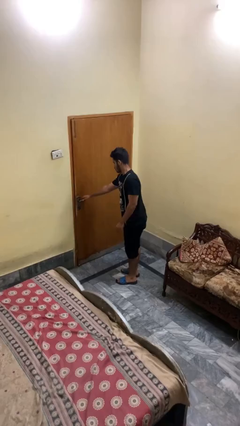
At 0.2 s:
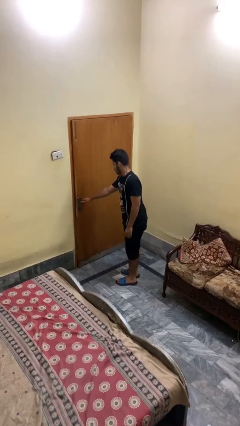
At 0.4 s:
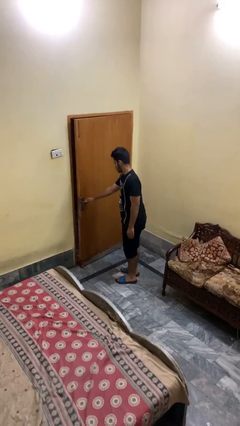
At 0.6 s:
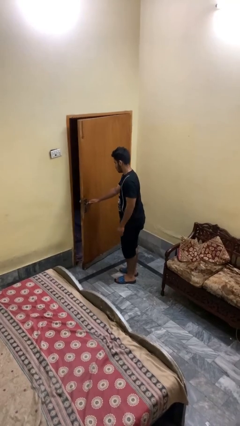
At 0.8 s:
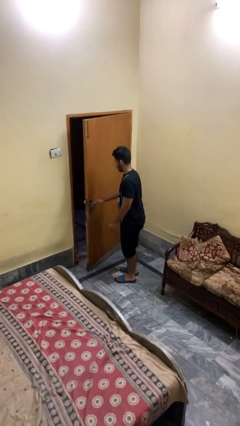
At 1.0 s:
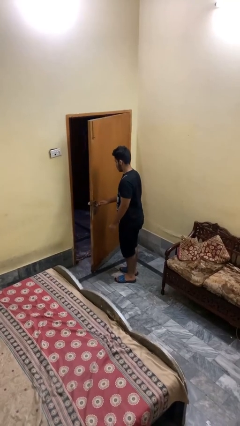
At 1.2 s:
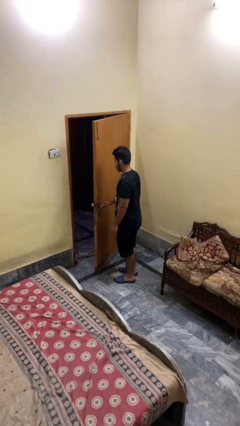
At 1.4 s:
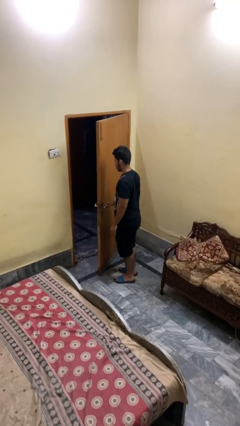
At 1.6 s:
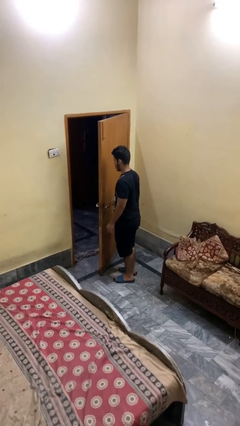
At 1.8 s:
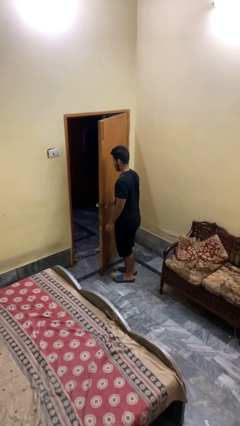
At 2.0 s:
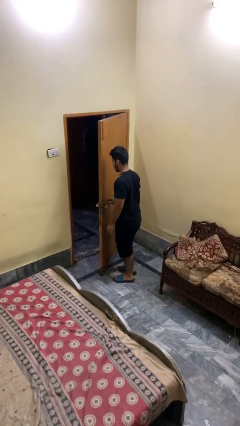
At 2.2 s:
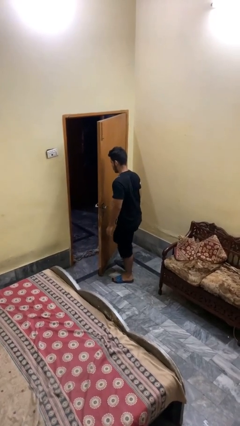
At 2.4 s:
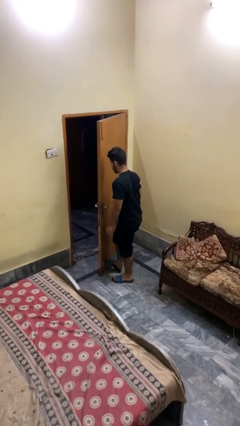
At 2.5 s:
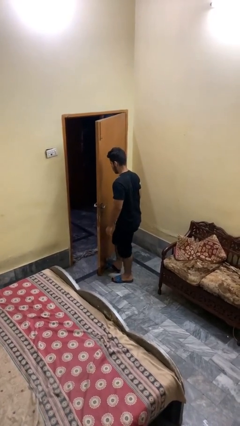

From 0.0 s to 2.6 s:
person opens facility door

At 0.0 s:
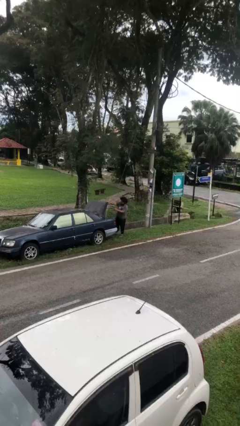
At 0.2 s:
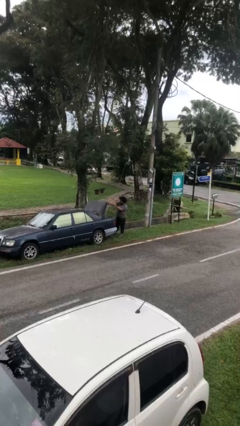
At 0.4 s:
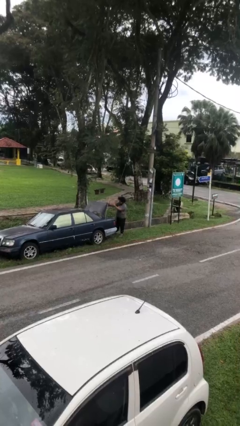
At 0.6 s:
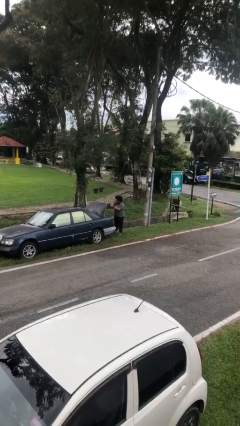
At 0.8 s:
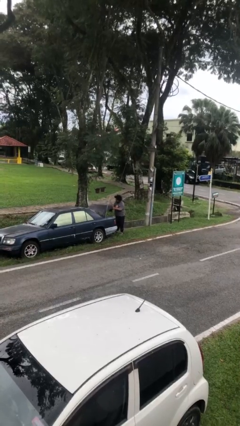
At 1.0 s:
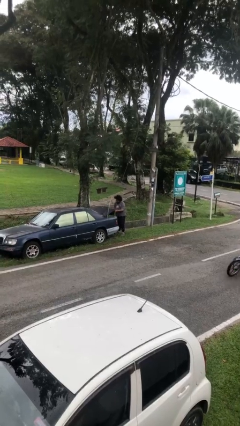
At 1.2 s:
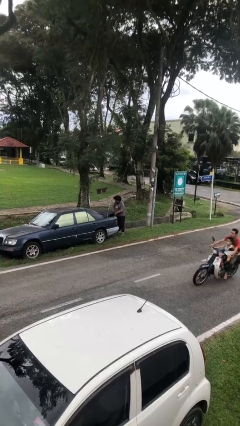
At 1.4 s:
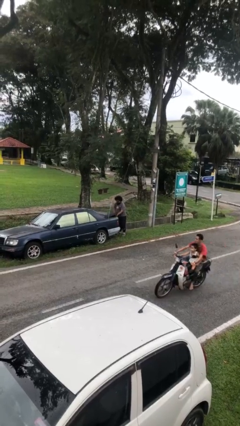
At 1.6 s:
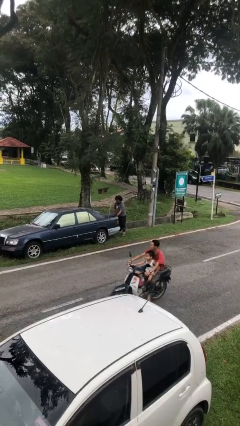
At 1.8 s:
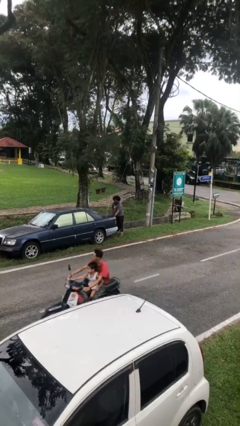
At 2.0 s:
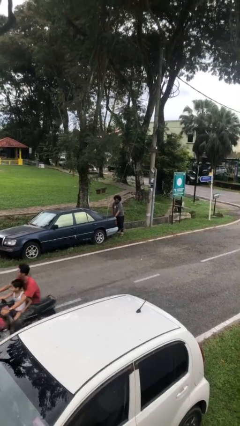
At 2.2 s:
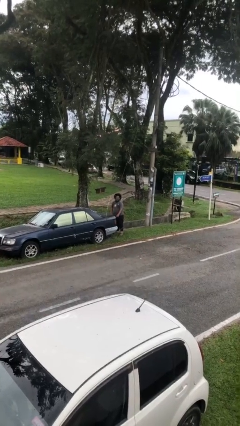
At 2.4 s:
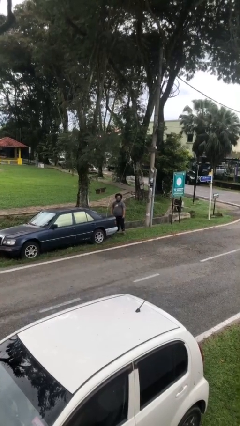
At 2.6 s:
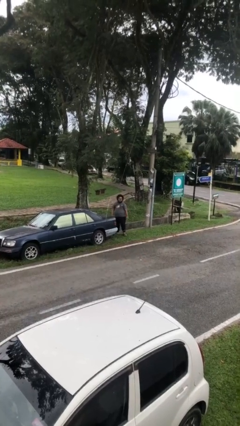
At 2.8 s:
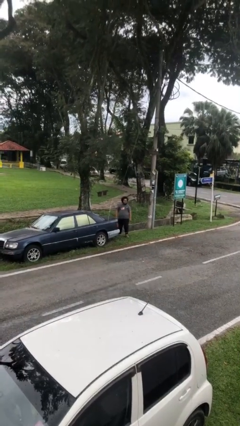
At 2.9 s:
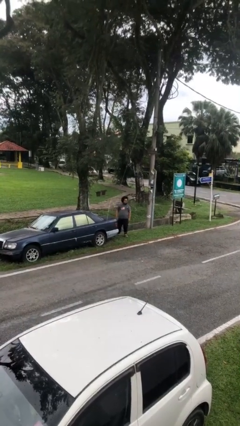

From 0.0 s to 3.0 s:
person closes car trunk

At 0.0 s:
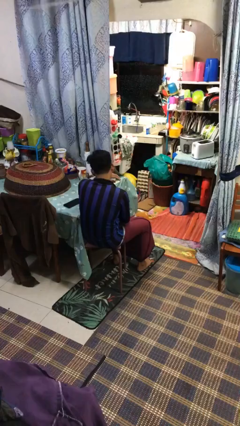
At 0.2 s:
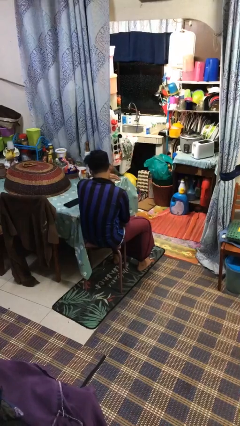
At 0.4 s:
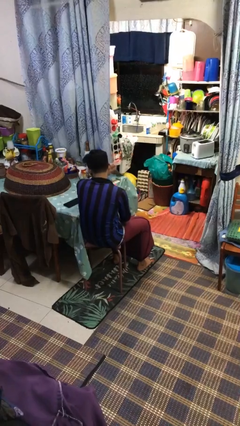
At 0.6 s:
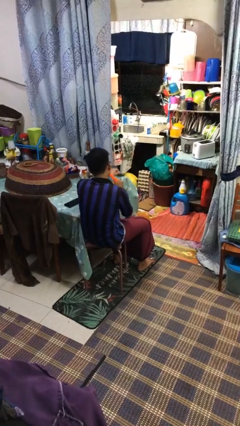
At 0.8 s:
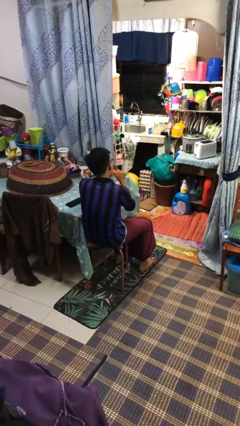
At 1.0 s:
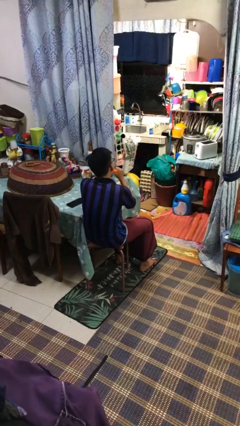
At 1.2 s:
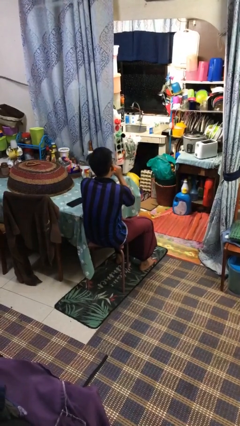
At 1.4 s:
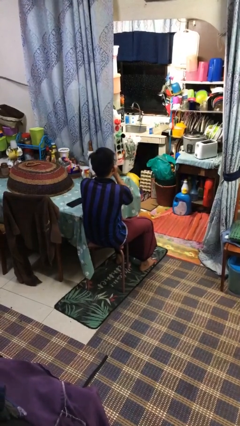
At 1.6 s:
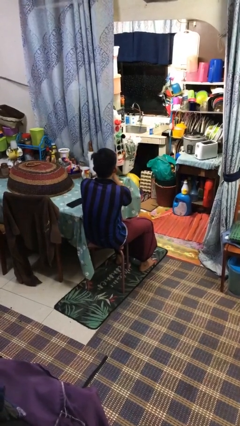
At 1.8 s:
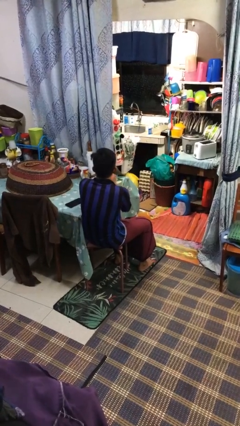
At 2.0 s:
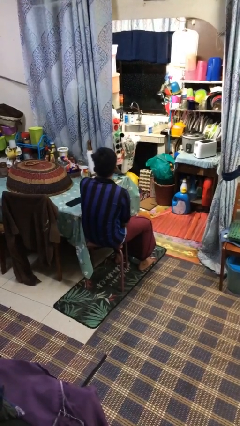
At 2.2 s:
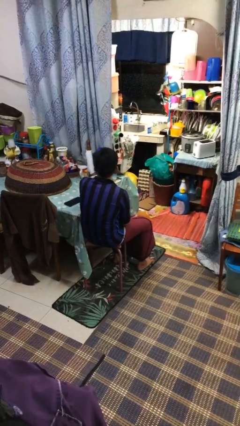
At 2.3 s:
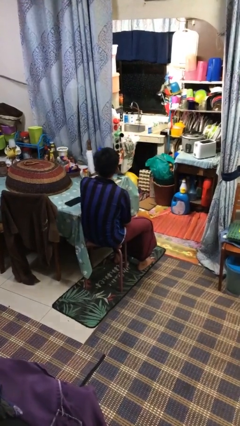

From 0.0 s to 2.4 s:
person vapes

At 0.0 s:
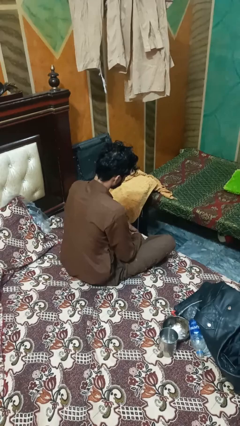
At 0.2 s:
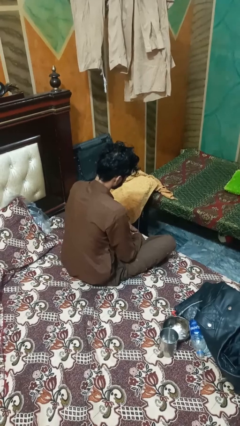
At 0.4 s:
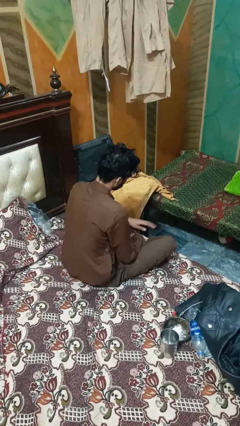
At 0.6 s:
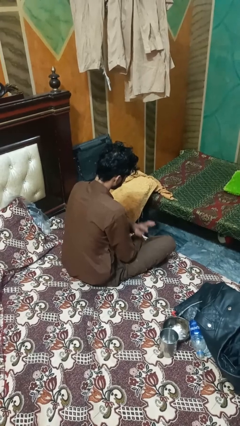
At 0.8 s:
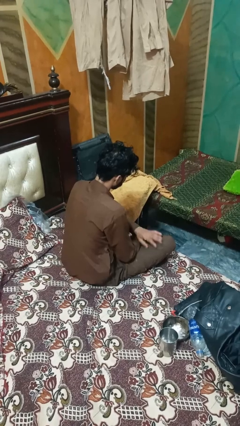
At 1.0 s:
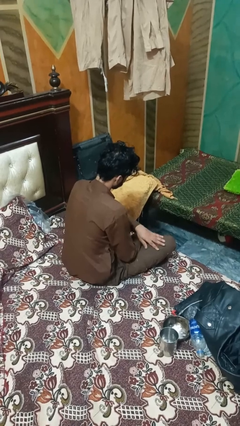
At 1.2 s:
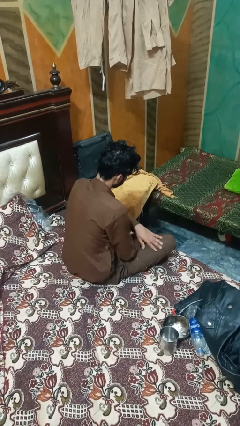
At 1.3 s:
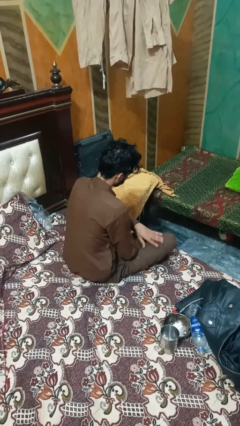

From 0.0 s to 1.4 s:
person slaps hands on thighs

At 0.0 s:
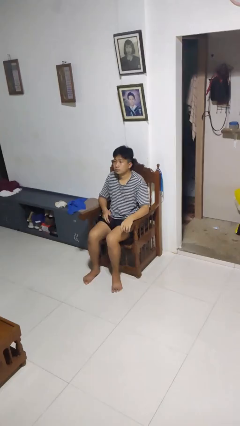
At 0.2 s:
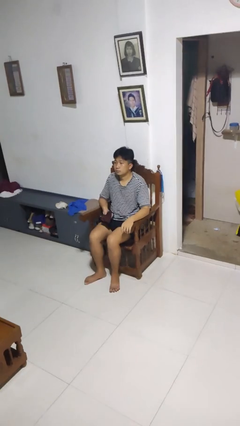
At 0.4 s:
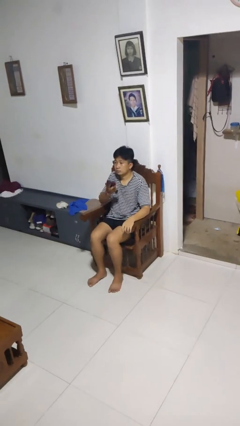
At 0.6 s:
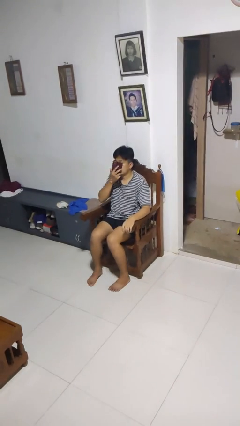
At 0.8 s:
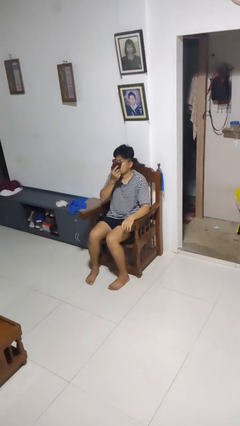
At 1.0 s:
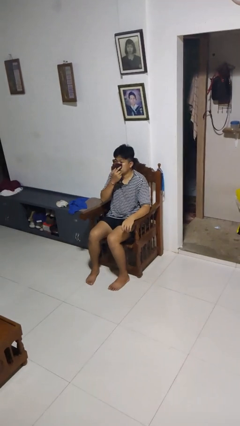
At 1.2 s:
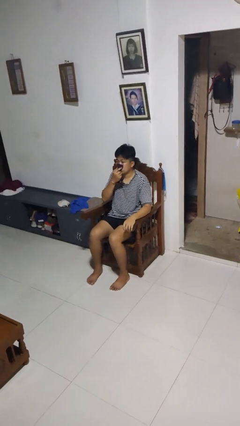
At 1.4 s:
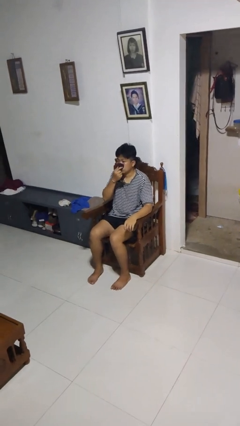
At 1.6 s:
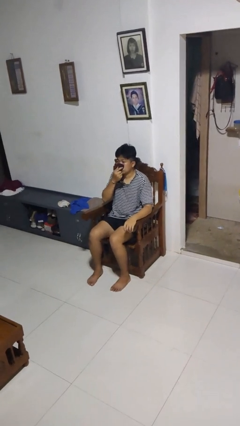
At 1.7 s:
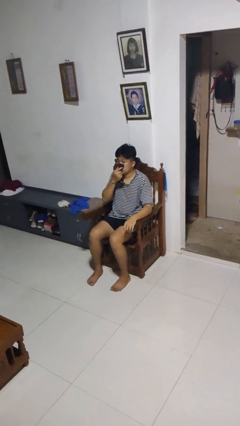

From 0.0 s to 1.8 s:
person blows nose

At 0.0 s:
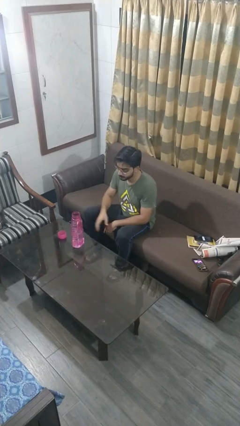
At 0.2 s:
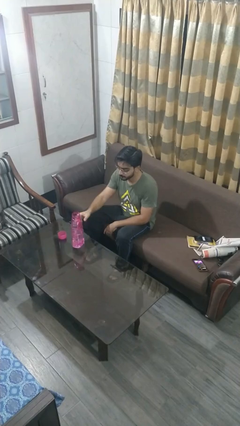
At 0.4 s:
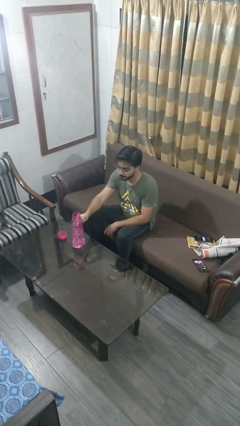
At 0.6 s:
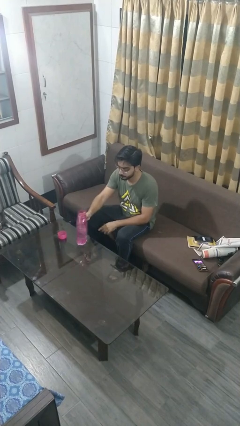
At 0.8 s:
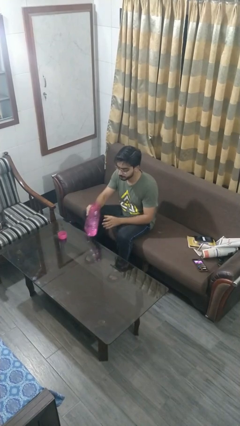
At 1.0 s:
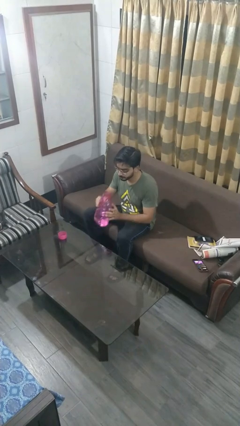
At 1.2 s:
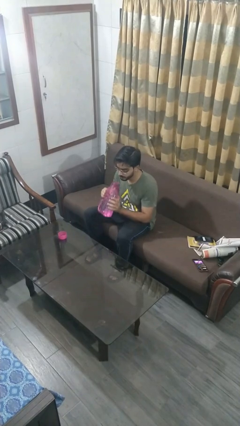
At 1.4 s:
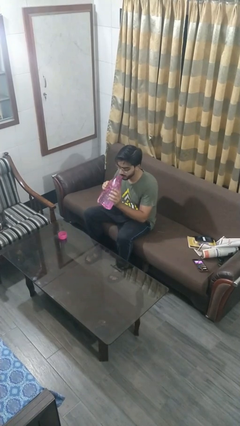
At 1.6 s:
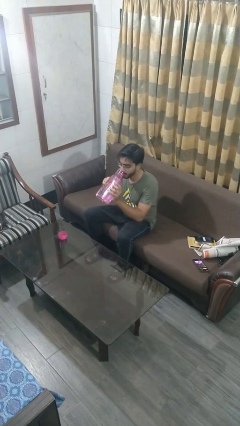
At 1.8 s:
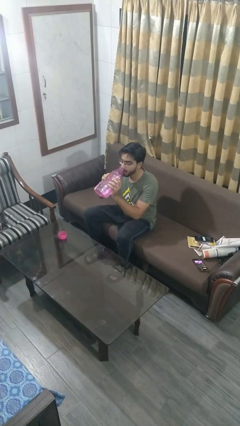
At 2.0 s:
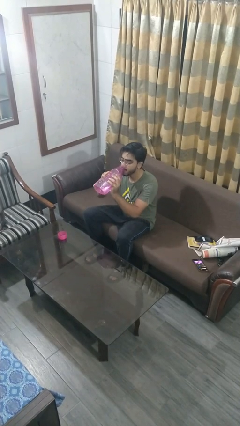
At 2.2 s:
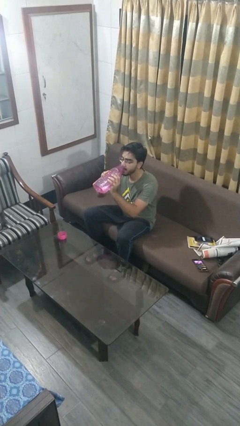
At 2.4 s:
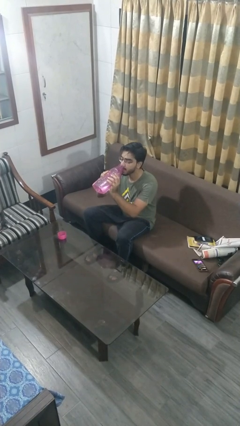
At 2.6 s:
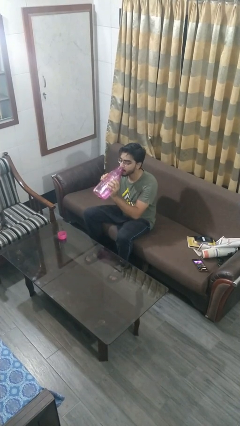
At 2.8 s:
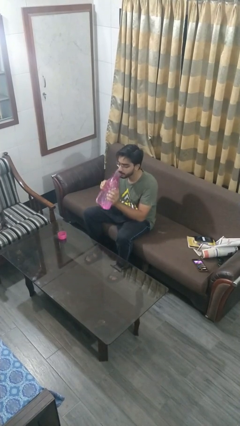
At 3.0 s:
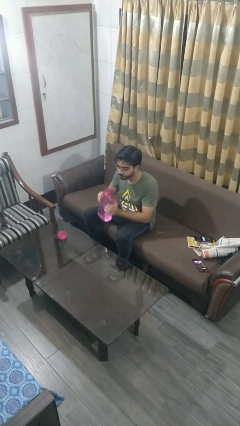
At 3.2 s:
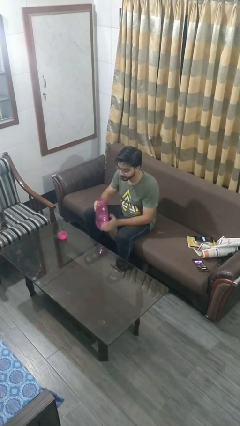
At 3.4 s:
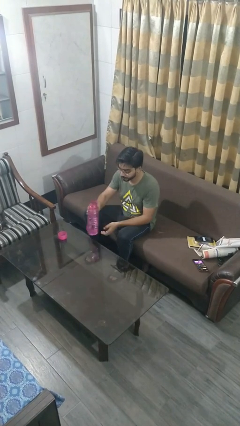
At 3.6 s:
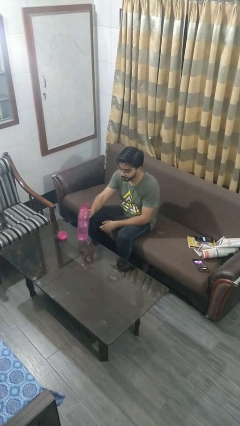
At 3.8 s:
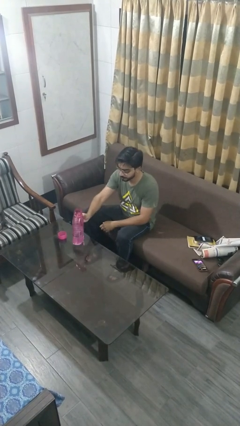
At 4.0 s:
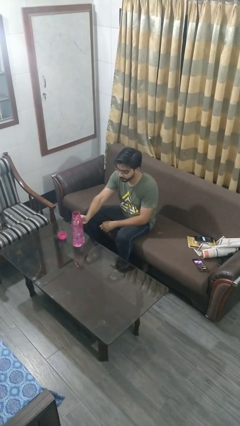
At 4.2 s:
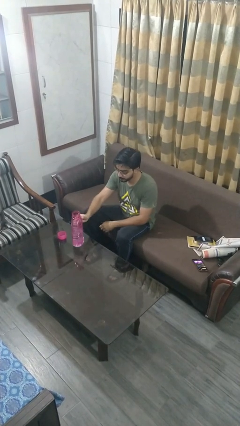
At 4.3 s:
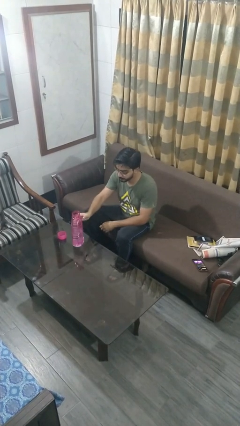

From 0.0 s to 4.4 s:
person drinks from bottle

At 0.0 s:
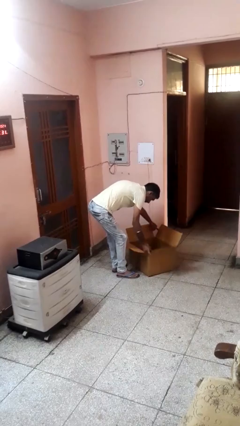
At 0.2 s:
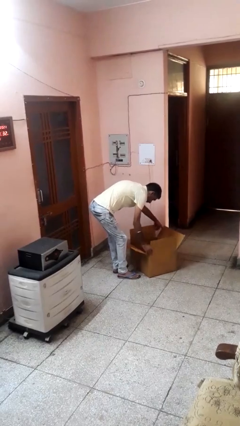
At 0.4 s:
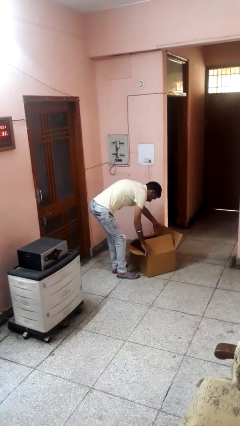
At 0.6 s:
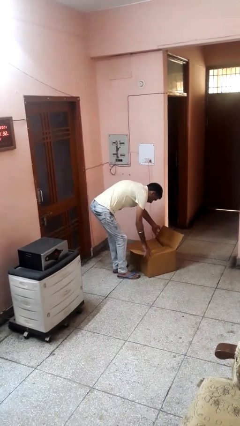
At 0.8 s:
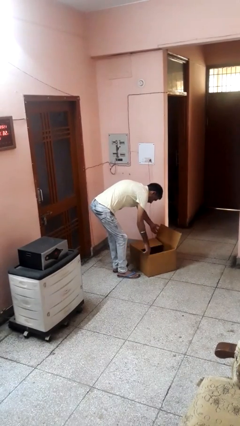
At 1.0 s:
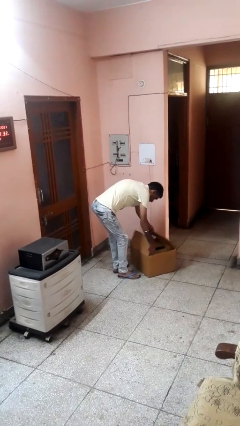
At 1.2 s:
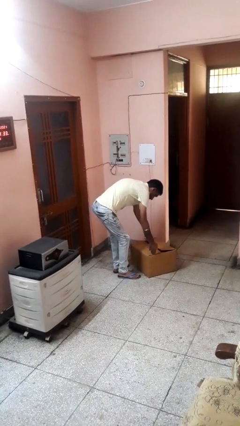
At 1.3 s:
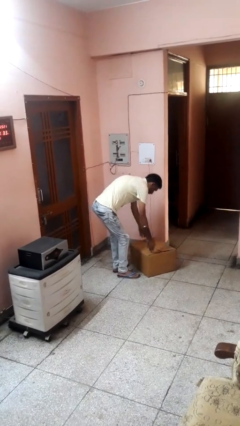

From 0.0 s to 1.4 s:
person closes box

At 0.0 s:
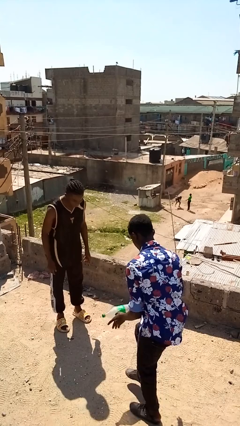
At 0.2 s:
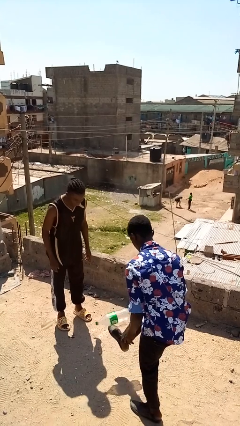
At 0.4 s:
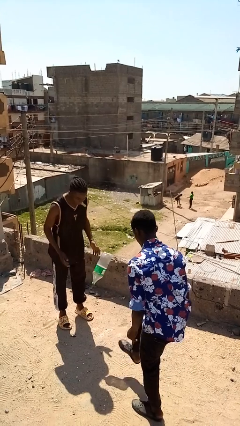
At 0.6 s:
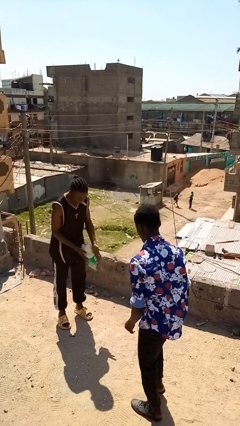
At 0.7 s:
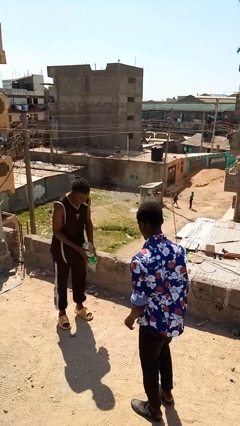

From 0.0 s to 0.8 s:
person kicks object to person
